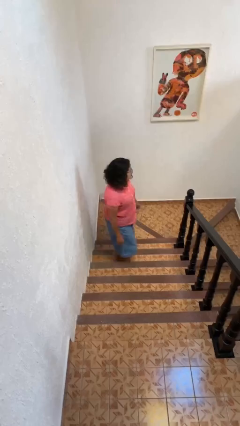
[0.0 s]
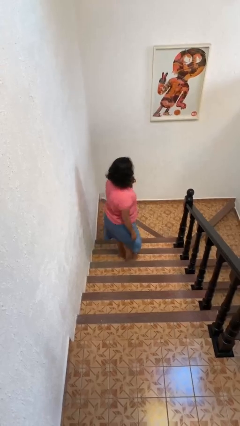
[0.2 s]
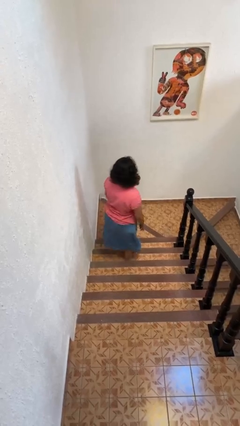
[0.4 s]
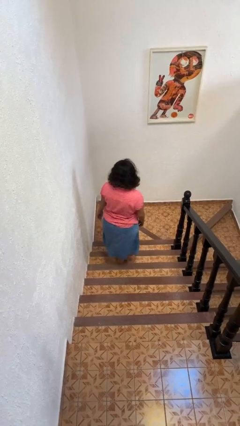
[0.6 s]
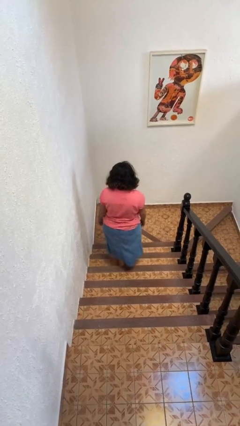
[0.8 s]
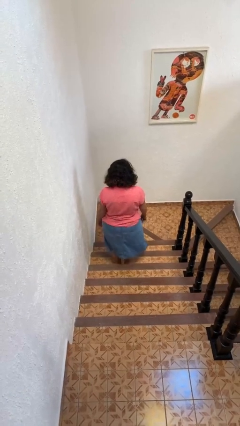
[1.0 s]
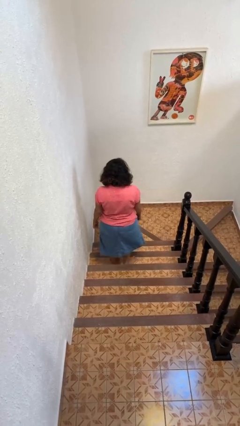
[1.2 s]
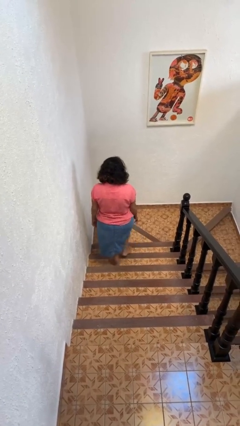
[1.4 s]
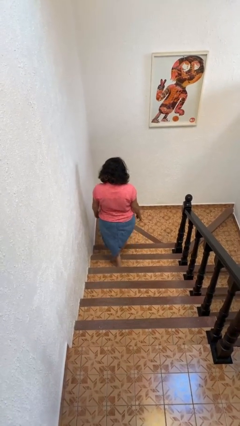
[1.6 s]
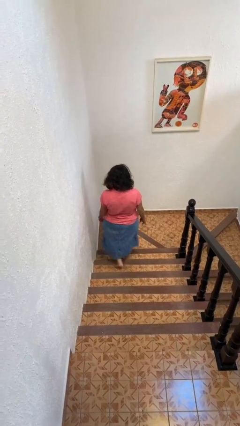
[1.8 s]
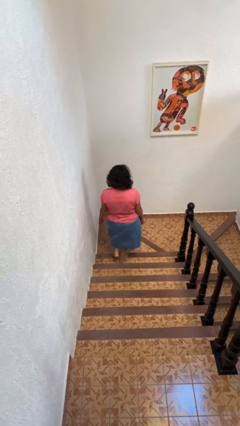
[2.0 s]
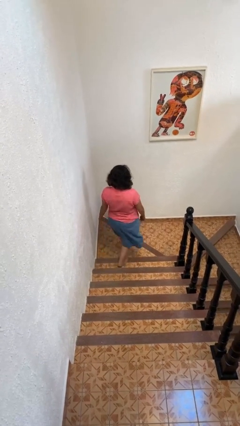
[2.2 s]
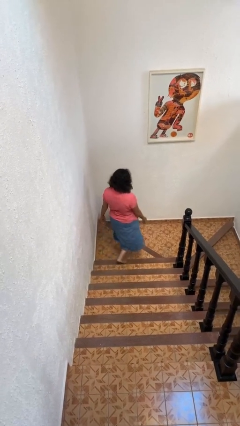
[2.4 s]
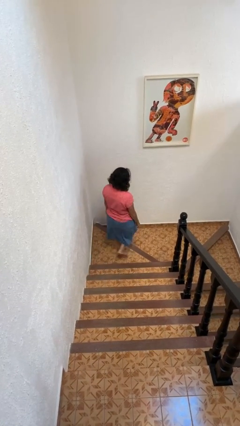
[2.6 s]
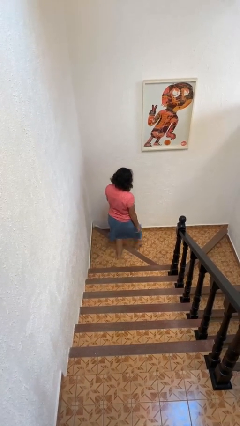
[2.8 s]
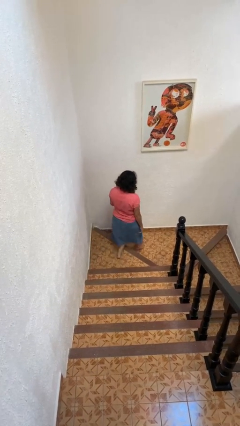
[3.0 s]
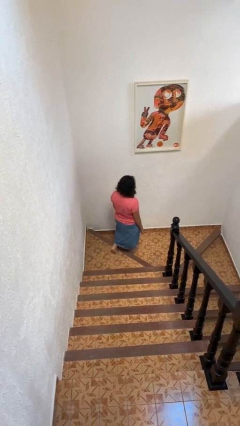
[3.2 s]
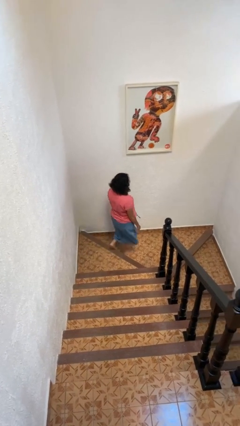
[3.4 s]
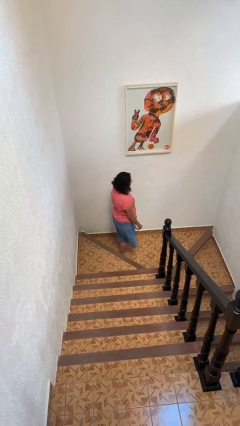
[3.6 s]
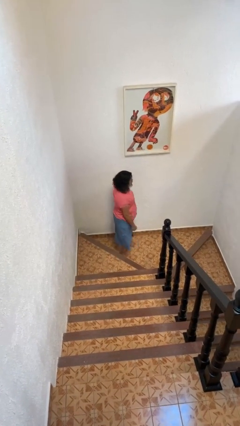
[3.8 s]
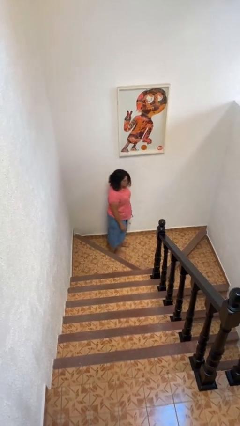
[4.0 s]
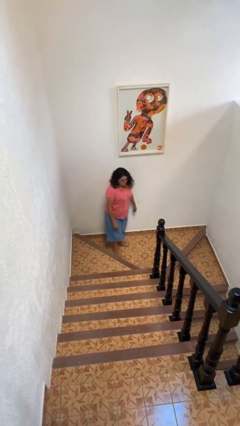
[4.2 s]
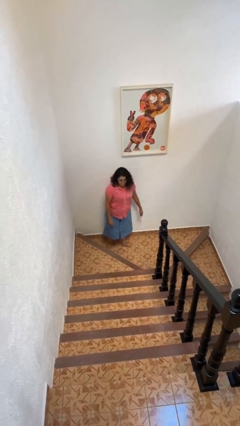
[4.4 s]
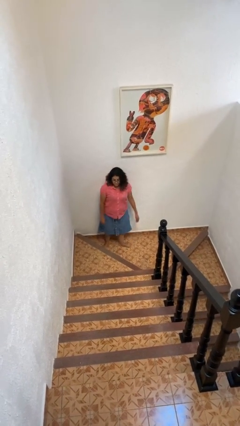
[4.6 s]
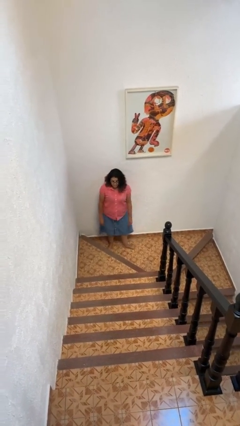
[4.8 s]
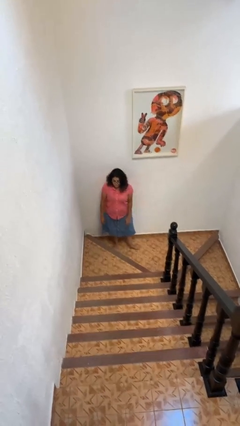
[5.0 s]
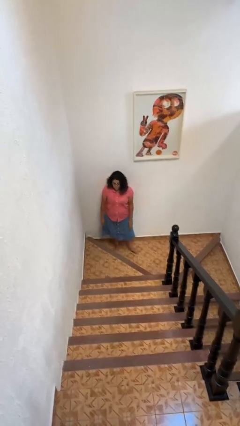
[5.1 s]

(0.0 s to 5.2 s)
person climbs down stairs

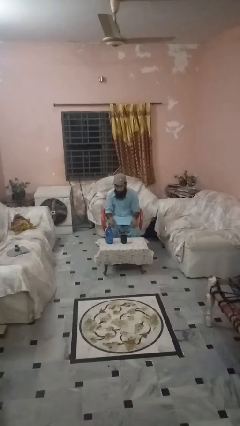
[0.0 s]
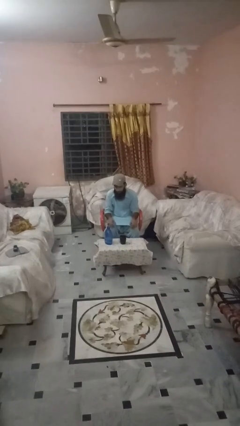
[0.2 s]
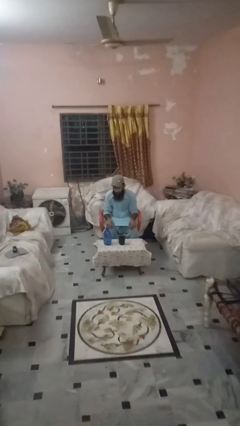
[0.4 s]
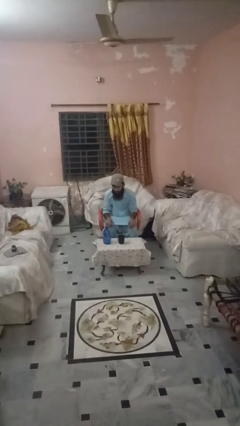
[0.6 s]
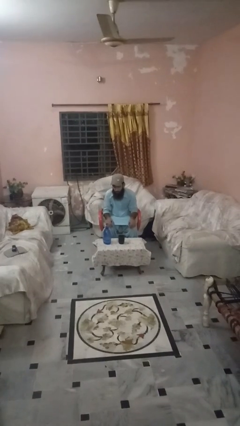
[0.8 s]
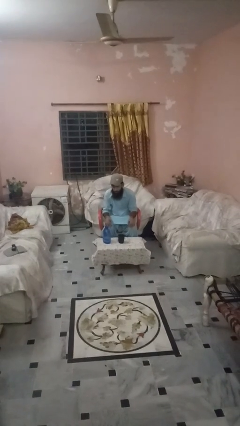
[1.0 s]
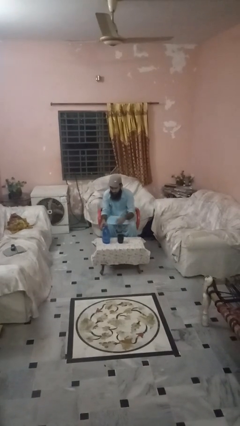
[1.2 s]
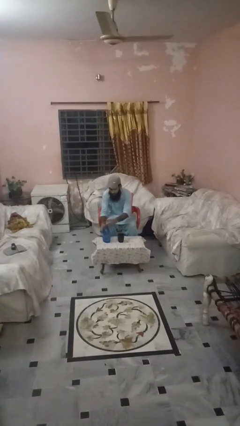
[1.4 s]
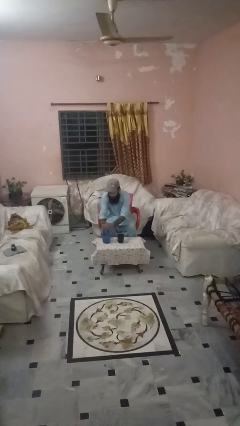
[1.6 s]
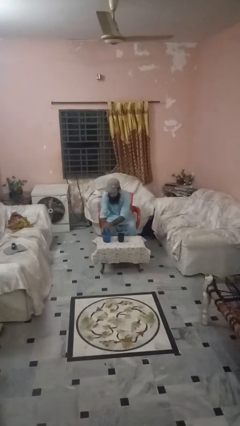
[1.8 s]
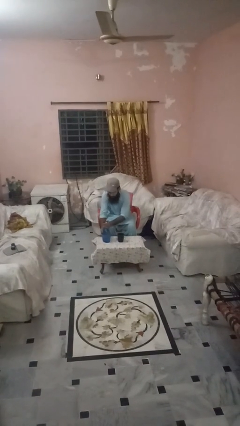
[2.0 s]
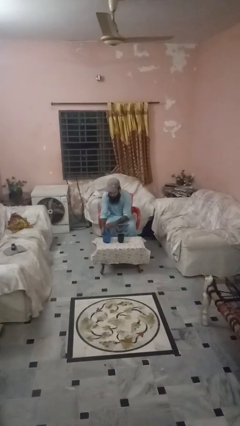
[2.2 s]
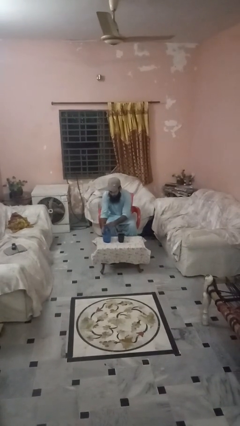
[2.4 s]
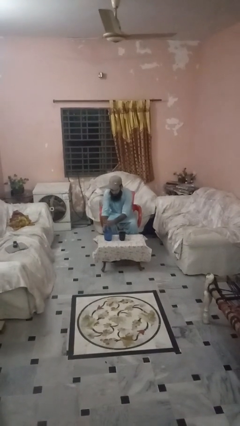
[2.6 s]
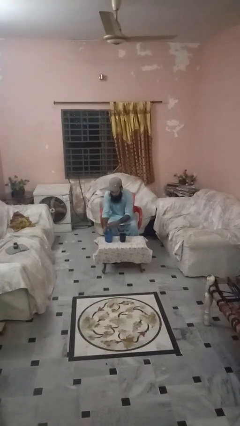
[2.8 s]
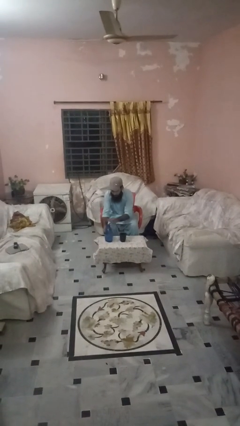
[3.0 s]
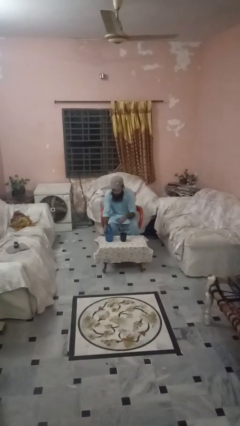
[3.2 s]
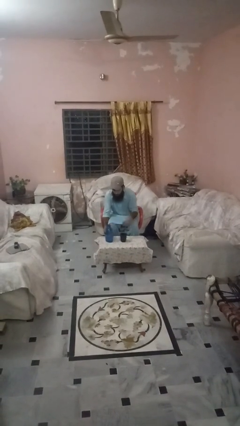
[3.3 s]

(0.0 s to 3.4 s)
person unscrews lid from bottle

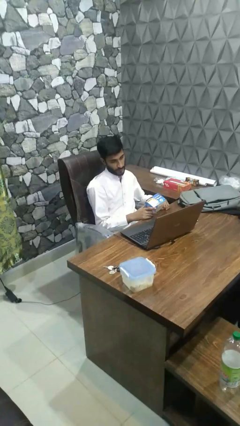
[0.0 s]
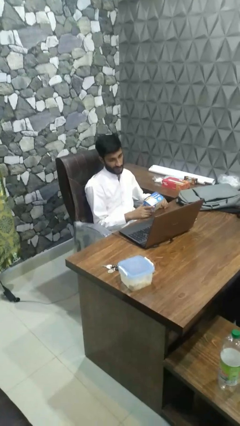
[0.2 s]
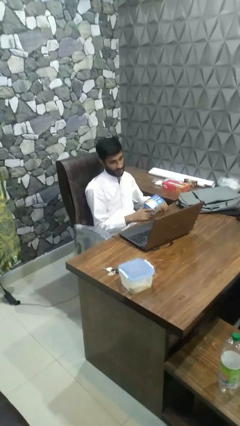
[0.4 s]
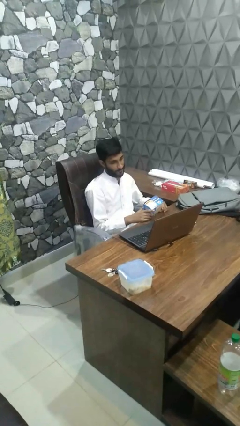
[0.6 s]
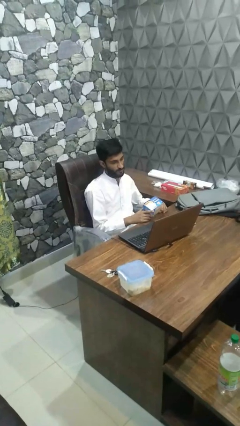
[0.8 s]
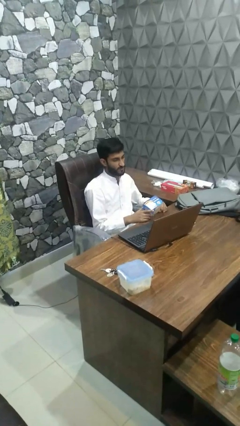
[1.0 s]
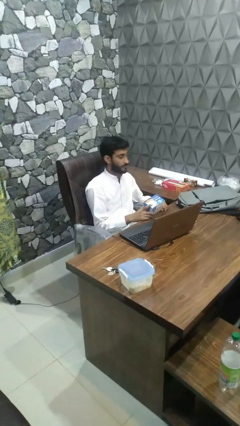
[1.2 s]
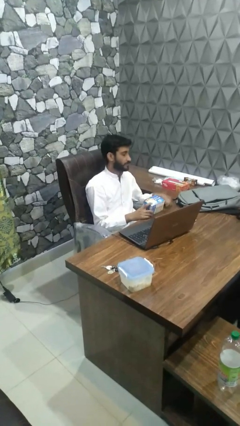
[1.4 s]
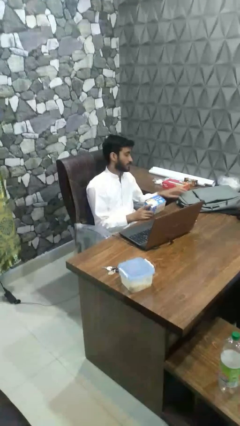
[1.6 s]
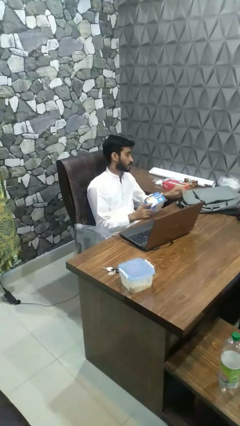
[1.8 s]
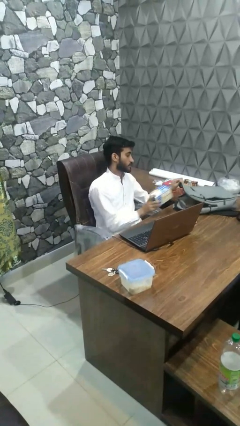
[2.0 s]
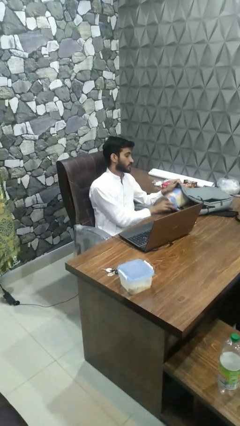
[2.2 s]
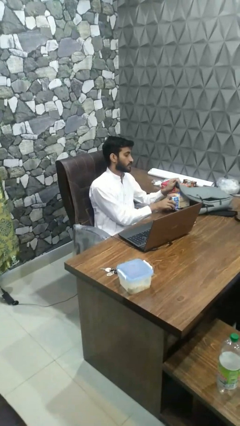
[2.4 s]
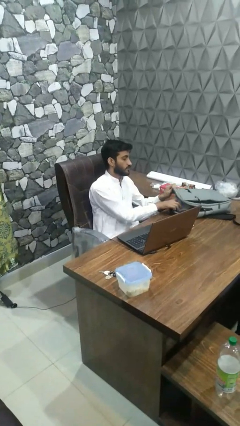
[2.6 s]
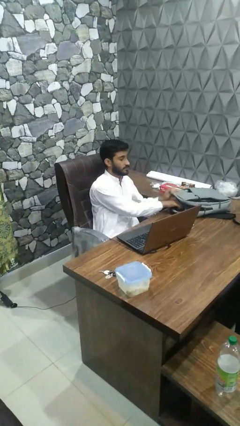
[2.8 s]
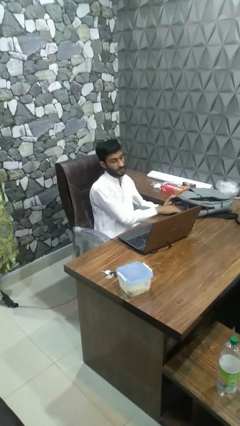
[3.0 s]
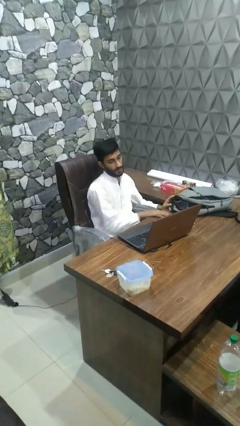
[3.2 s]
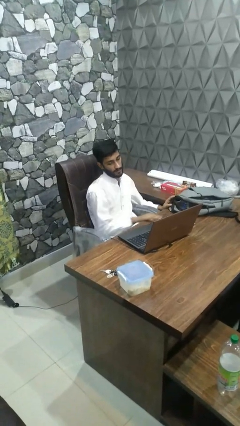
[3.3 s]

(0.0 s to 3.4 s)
person puts object into bag

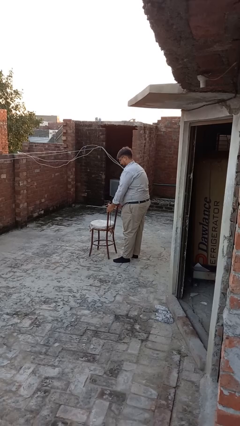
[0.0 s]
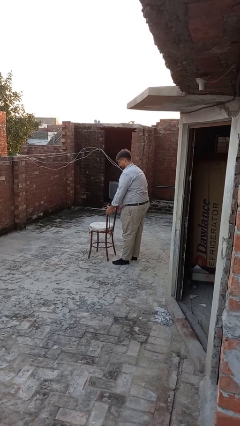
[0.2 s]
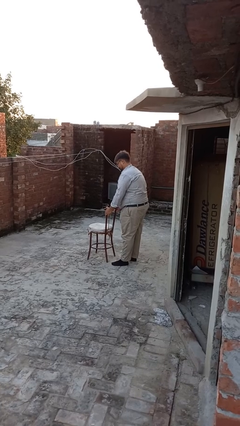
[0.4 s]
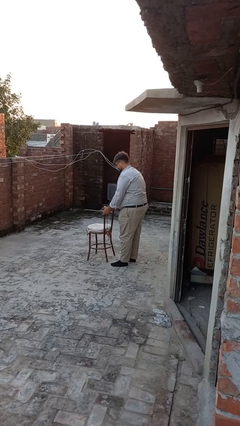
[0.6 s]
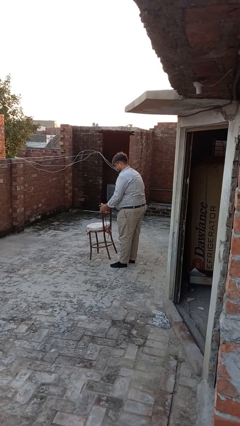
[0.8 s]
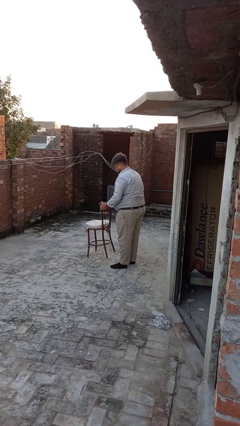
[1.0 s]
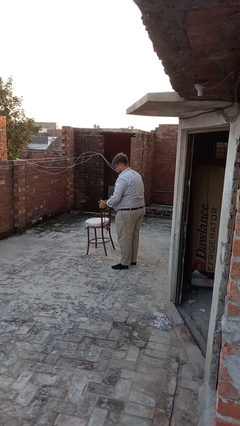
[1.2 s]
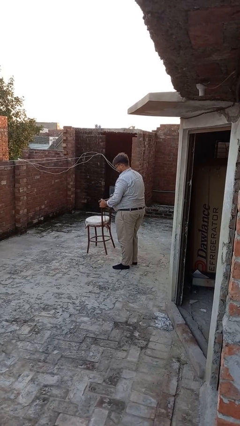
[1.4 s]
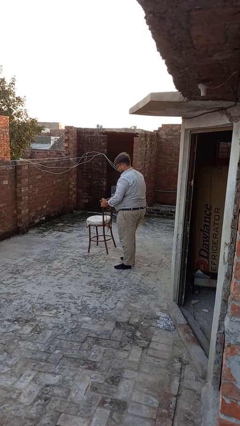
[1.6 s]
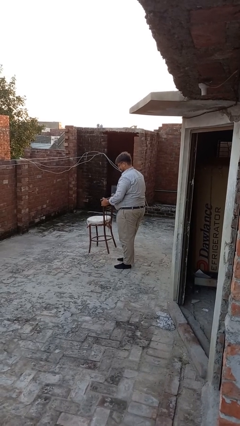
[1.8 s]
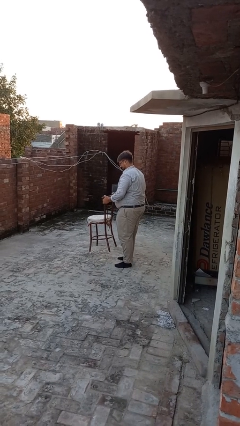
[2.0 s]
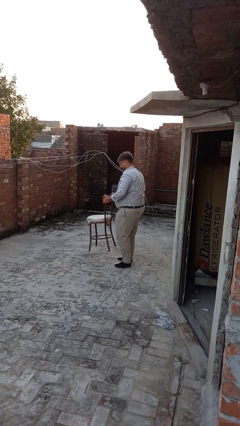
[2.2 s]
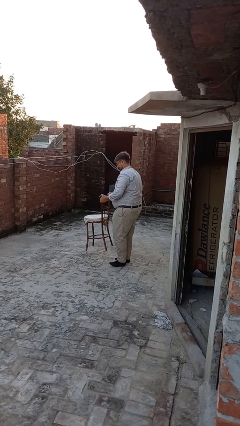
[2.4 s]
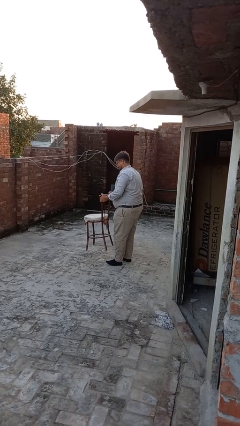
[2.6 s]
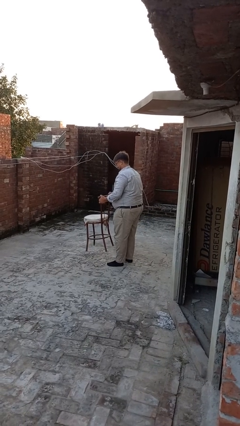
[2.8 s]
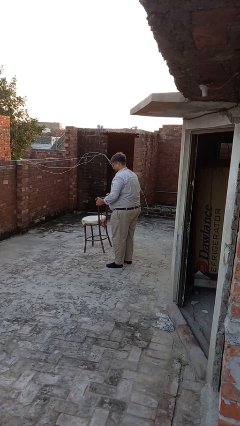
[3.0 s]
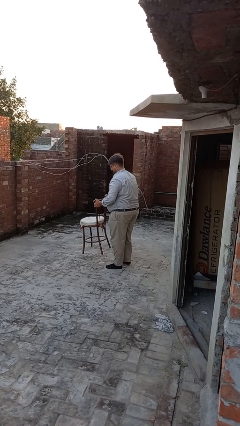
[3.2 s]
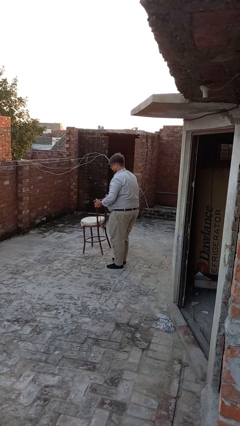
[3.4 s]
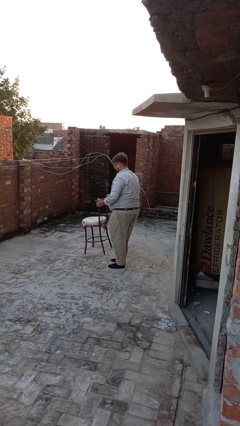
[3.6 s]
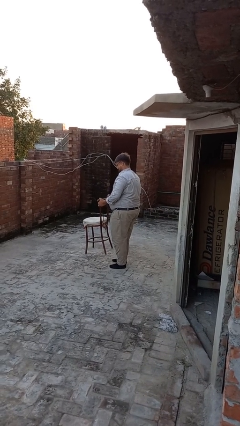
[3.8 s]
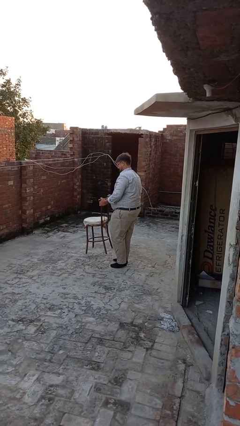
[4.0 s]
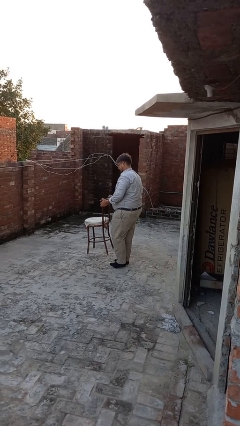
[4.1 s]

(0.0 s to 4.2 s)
person carries furniture

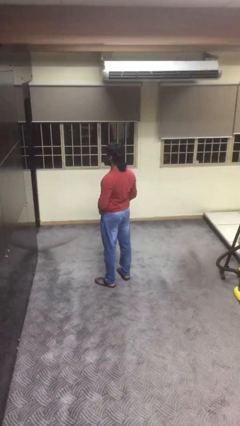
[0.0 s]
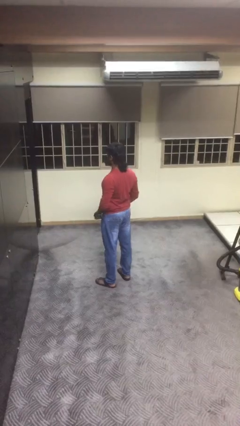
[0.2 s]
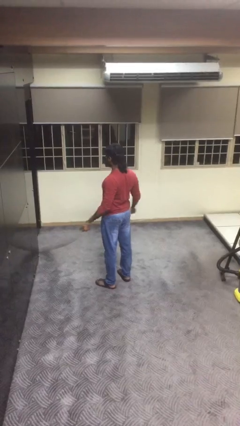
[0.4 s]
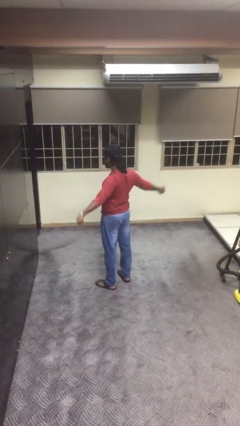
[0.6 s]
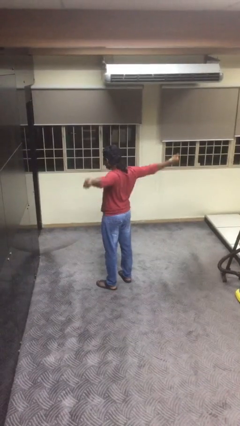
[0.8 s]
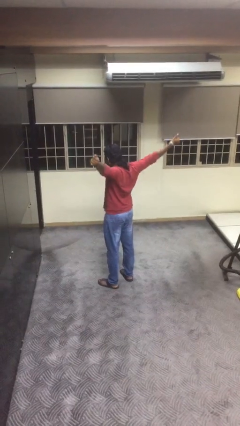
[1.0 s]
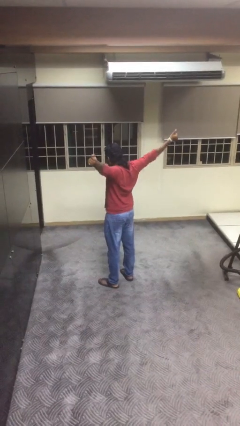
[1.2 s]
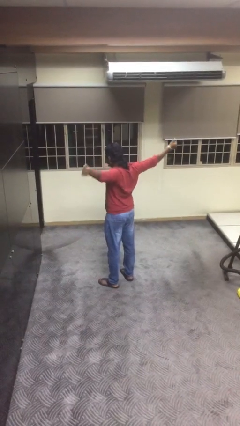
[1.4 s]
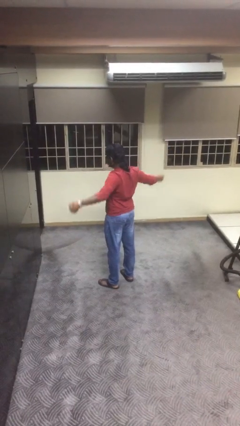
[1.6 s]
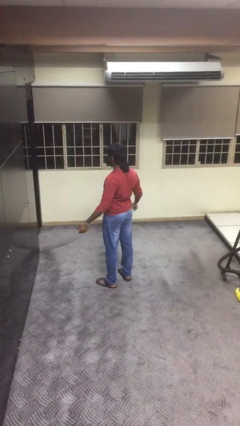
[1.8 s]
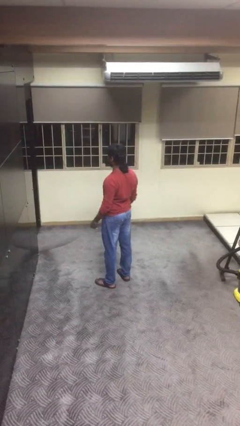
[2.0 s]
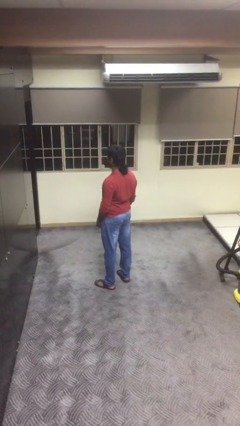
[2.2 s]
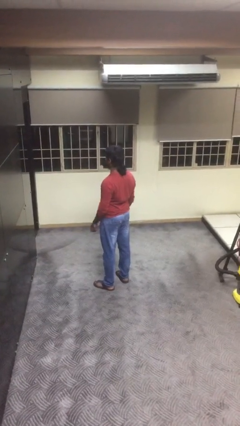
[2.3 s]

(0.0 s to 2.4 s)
person stretches arms to side
